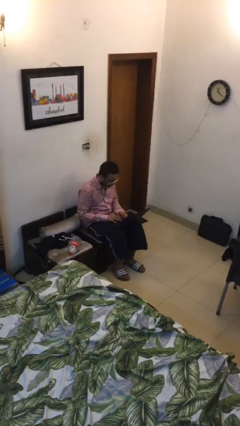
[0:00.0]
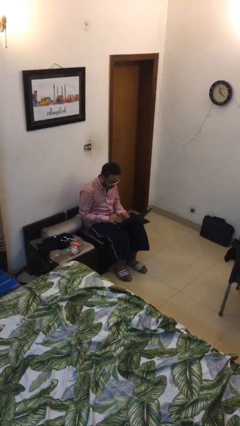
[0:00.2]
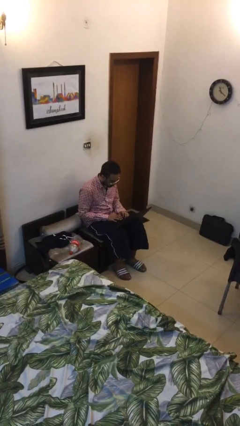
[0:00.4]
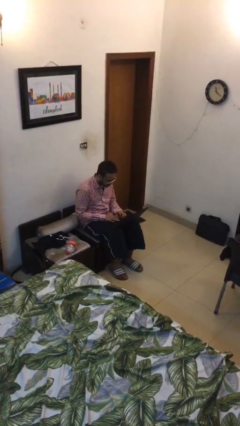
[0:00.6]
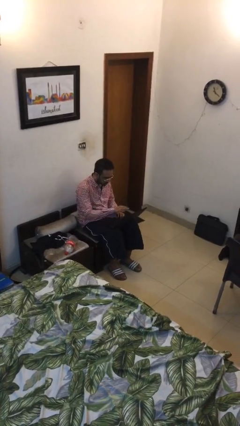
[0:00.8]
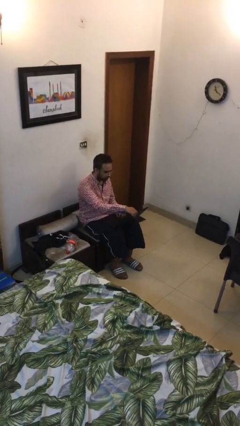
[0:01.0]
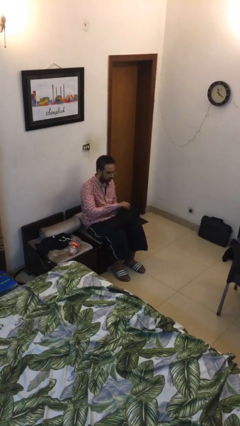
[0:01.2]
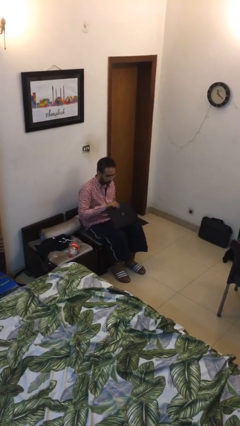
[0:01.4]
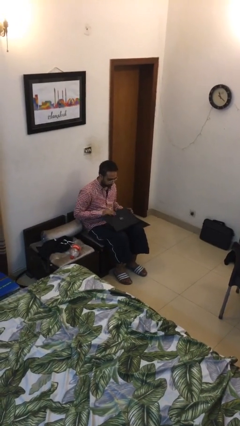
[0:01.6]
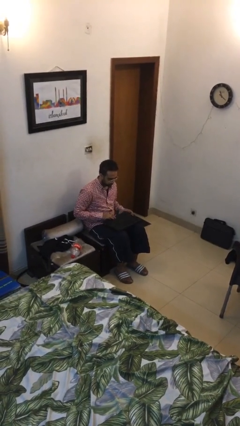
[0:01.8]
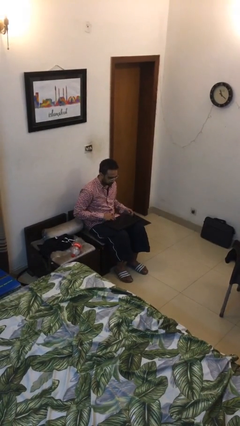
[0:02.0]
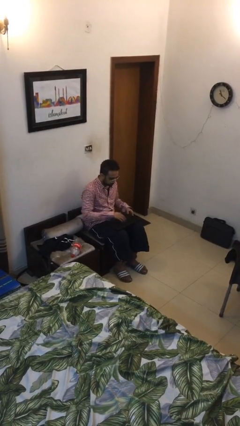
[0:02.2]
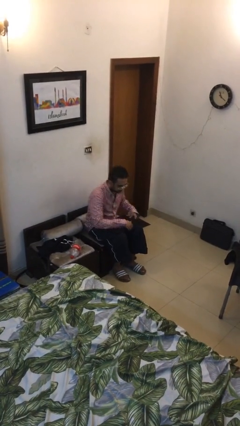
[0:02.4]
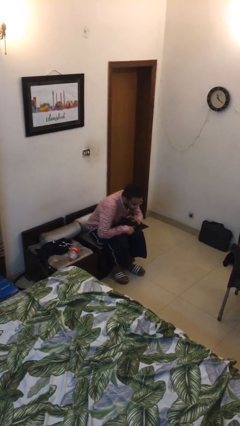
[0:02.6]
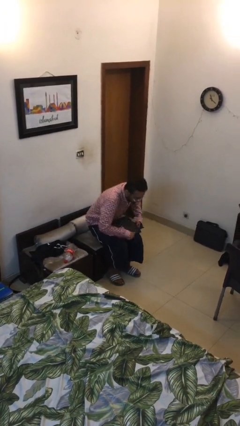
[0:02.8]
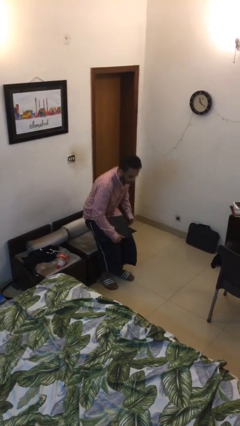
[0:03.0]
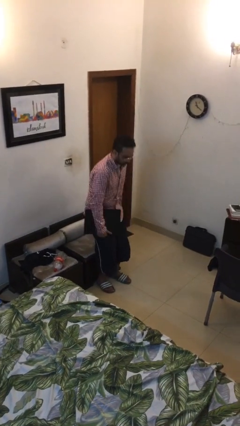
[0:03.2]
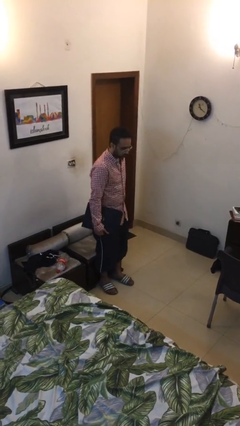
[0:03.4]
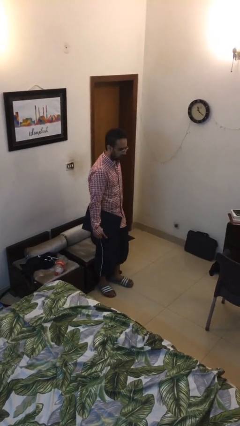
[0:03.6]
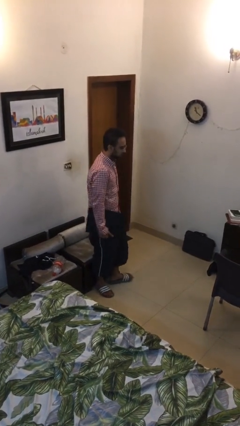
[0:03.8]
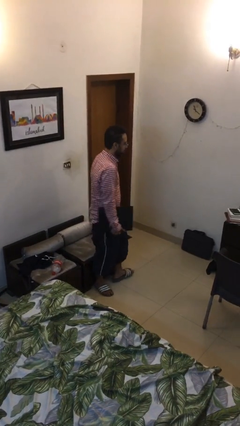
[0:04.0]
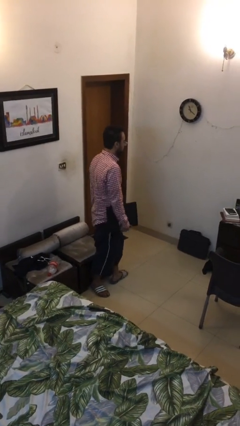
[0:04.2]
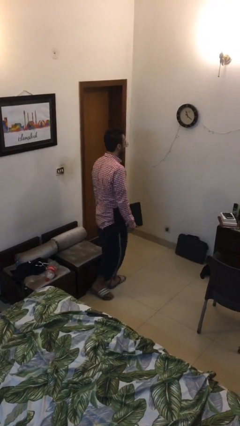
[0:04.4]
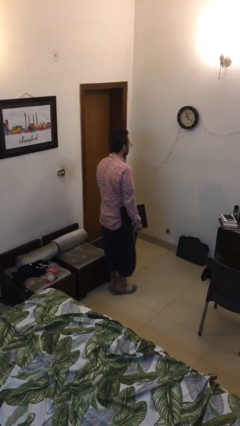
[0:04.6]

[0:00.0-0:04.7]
person stands up

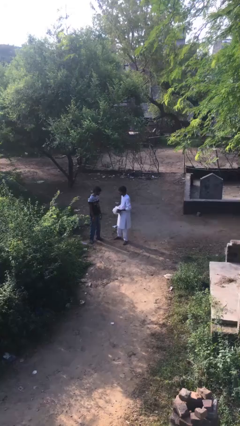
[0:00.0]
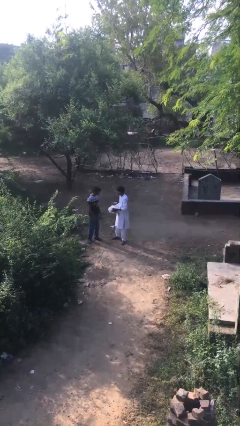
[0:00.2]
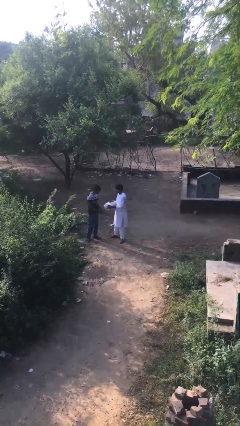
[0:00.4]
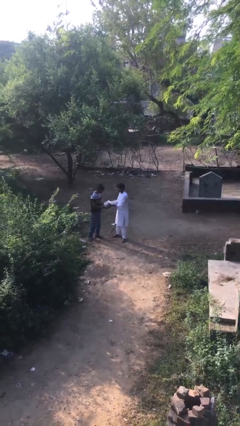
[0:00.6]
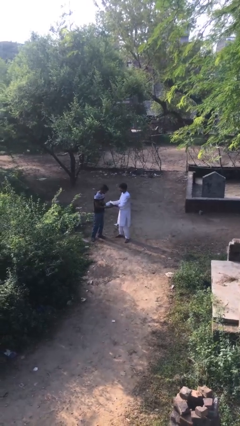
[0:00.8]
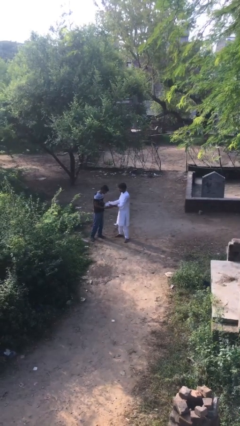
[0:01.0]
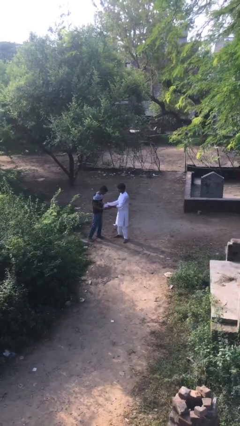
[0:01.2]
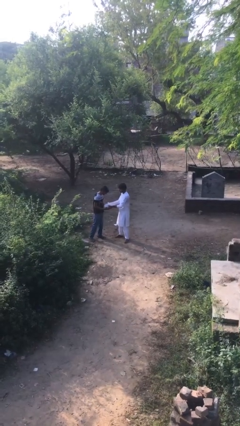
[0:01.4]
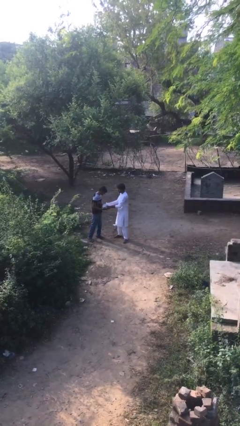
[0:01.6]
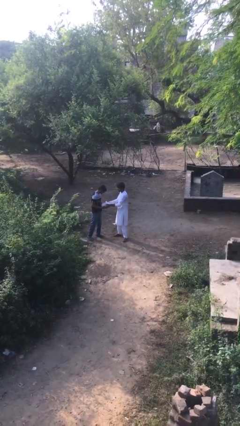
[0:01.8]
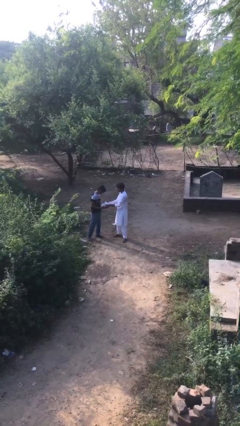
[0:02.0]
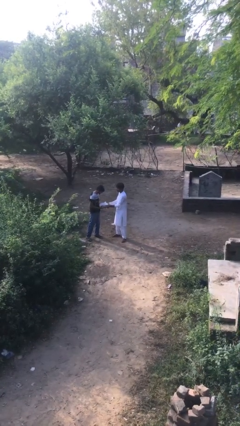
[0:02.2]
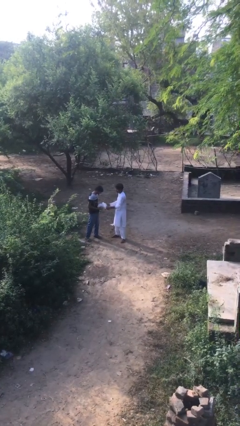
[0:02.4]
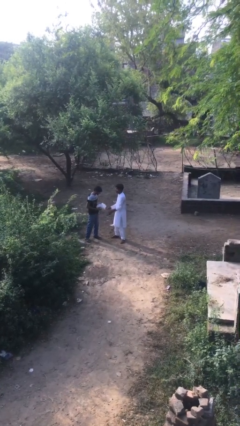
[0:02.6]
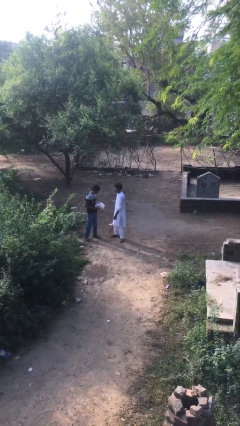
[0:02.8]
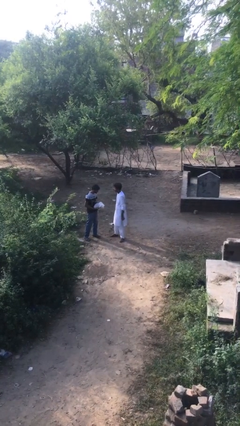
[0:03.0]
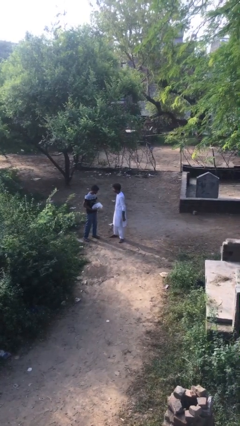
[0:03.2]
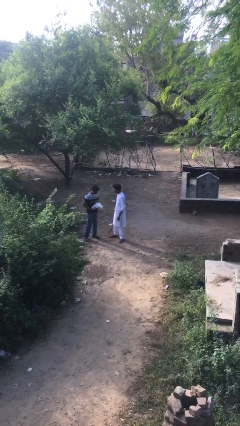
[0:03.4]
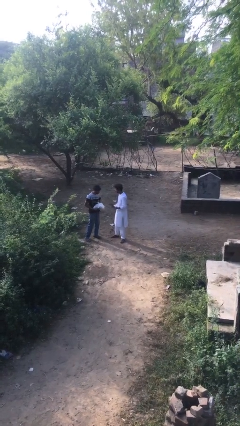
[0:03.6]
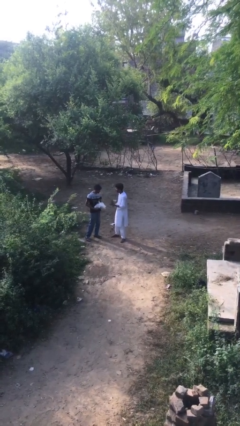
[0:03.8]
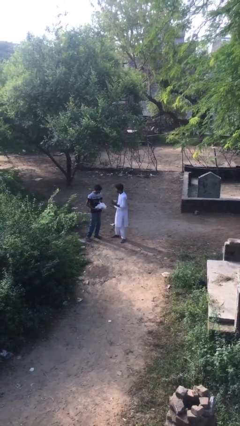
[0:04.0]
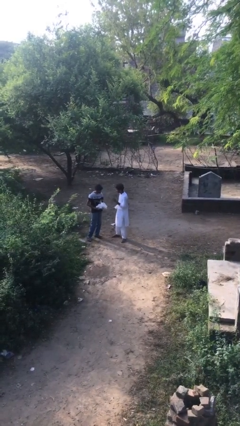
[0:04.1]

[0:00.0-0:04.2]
person transfers object to person

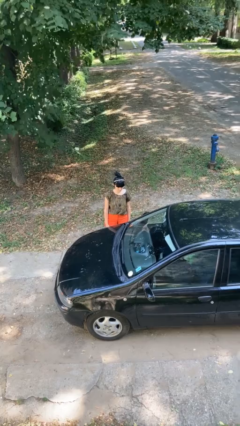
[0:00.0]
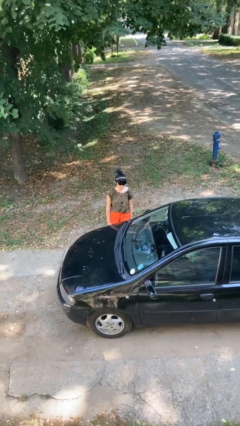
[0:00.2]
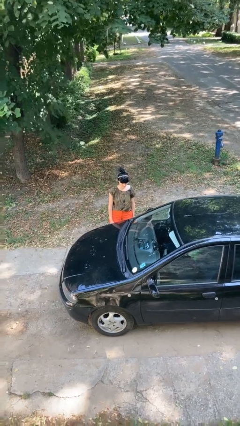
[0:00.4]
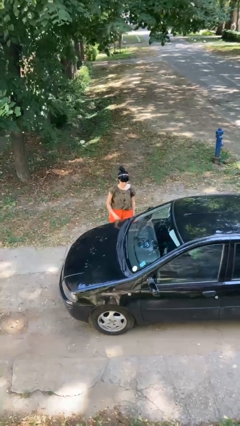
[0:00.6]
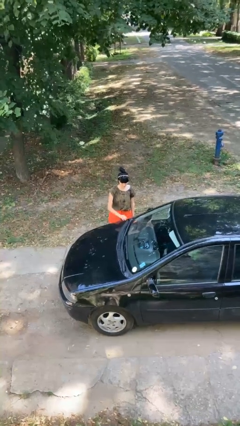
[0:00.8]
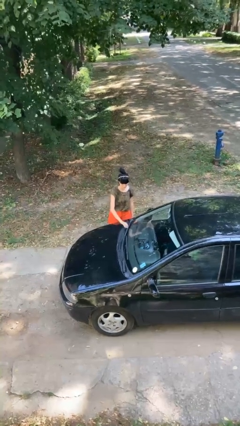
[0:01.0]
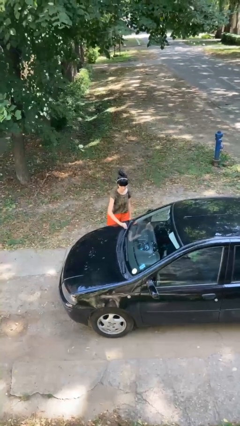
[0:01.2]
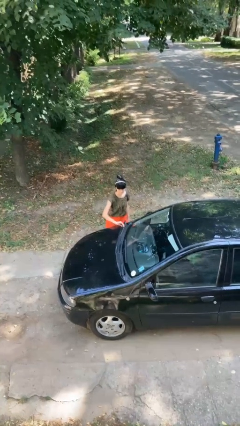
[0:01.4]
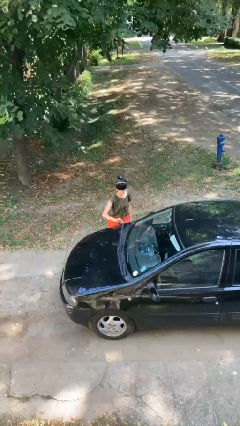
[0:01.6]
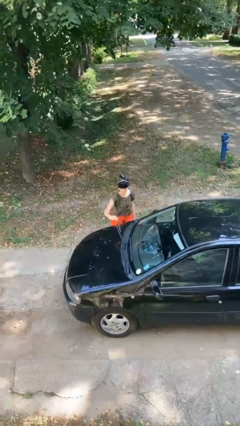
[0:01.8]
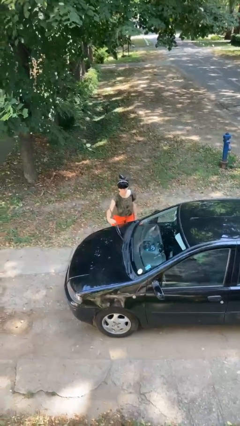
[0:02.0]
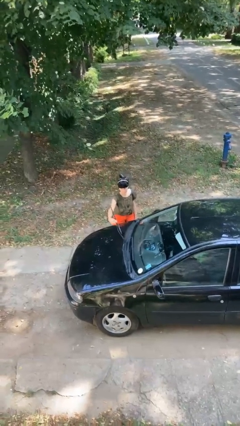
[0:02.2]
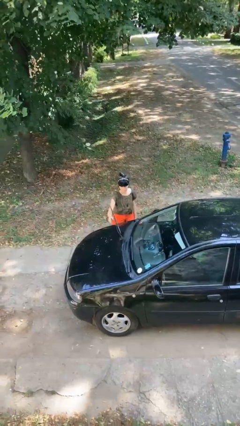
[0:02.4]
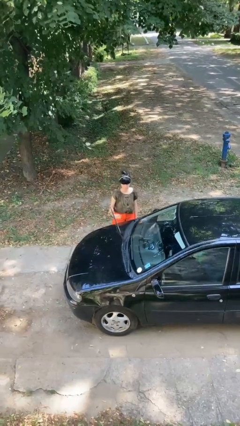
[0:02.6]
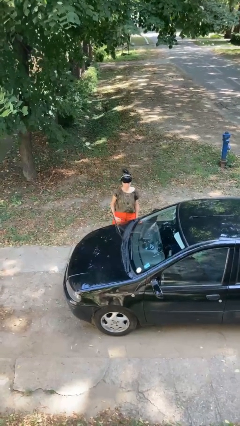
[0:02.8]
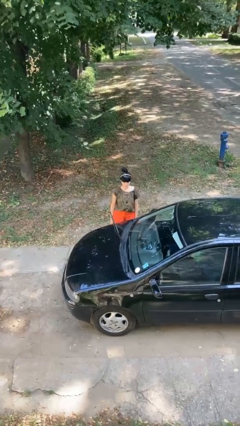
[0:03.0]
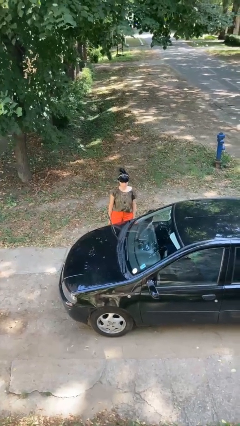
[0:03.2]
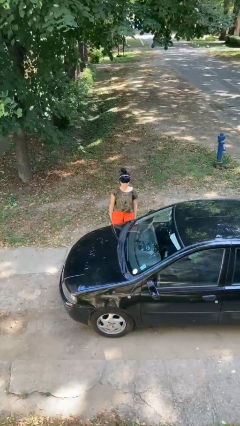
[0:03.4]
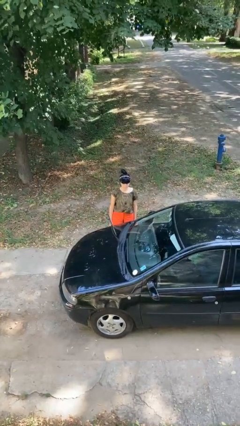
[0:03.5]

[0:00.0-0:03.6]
person flips up car wipers

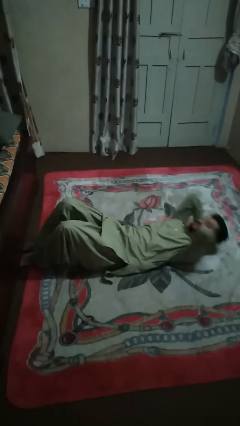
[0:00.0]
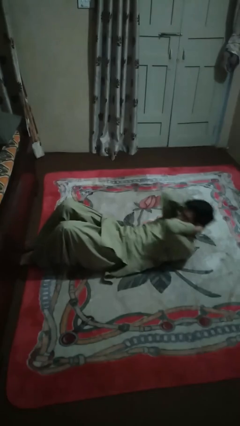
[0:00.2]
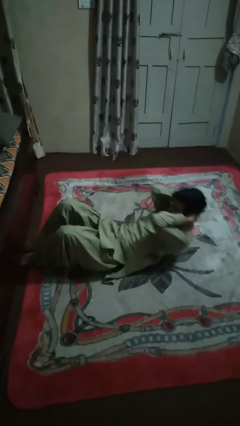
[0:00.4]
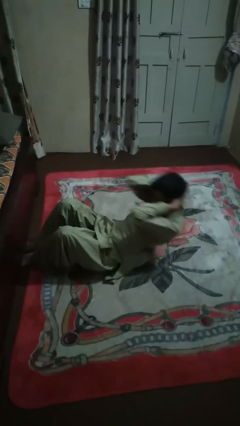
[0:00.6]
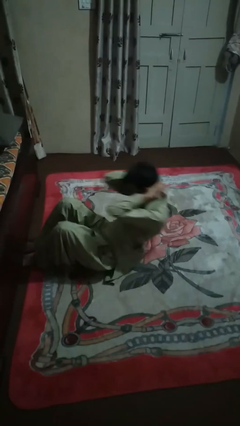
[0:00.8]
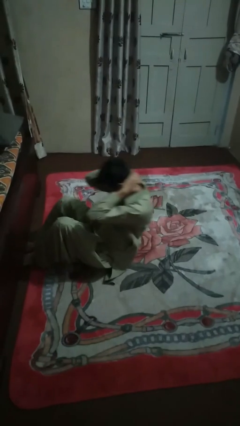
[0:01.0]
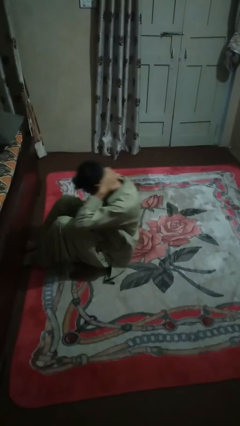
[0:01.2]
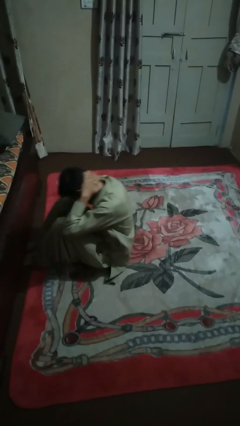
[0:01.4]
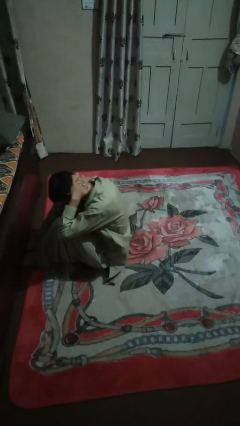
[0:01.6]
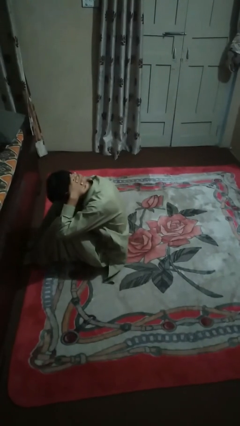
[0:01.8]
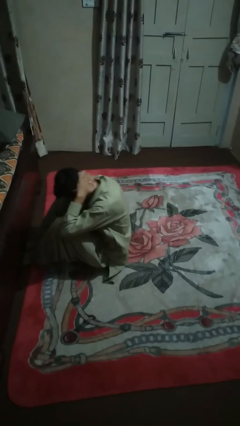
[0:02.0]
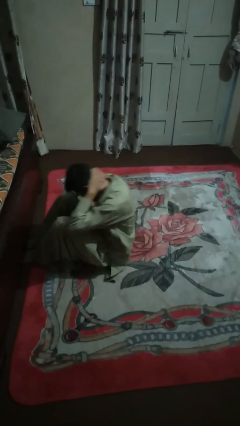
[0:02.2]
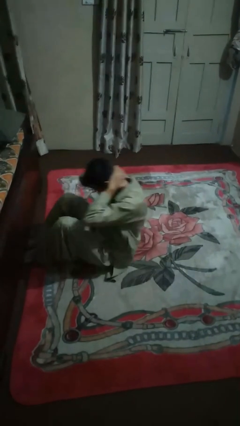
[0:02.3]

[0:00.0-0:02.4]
person exercises with situp

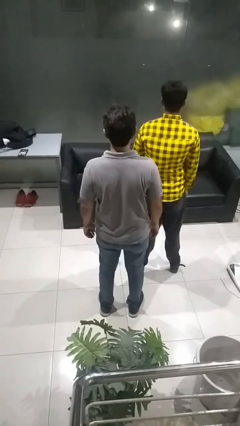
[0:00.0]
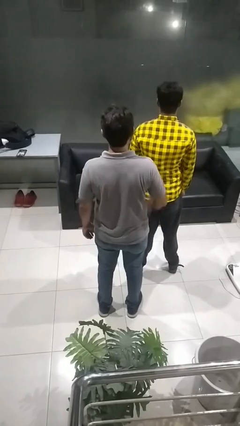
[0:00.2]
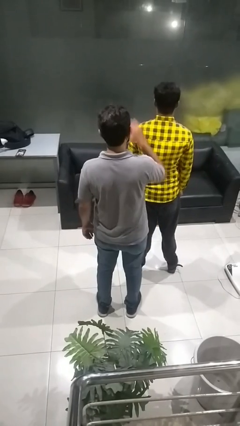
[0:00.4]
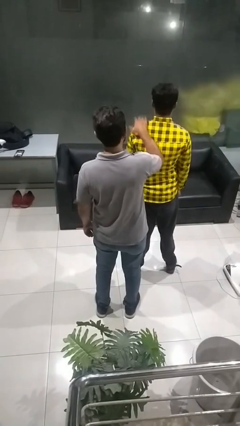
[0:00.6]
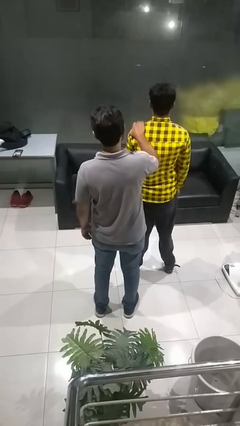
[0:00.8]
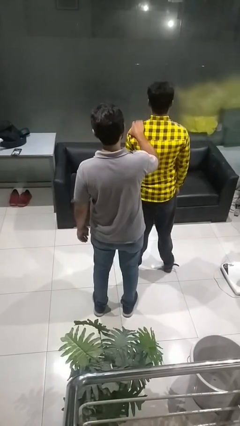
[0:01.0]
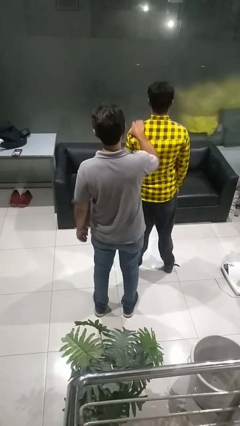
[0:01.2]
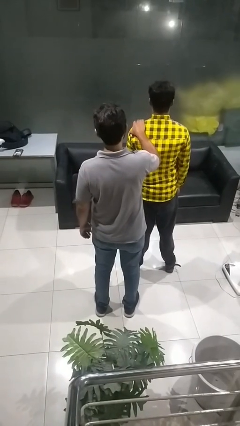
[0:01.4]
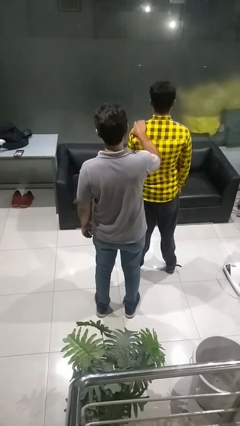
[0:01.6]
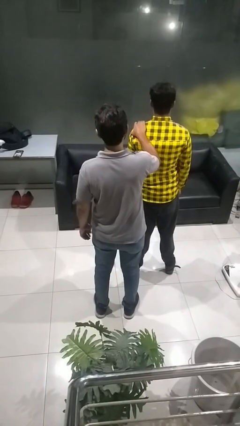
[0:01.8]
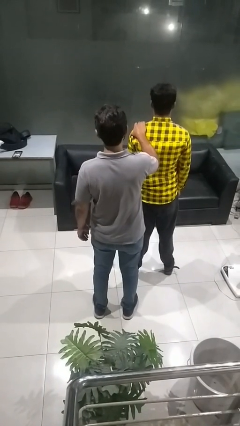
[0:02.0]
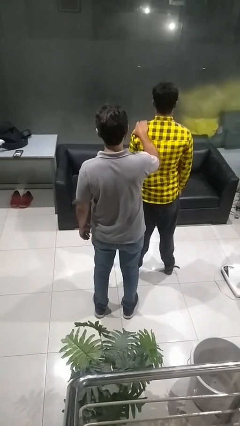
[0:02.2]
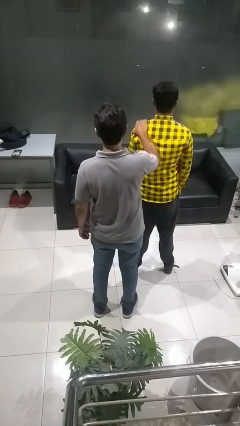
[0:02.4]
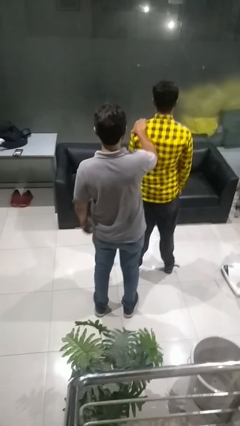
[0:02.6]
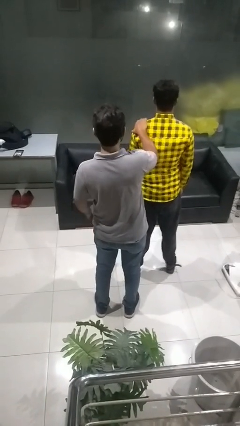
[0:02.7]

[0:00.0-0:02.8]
person grabs person by shoulder
